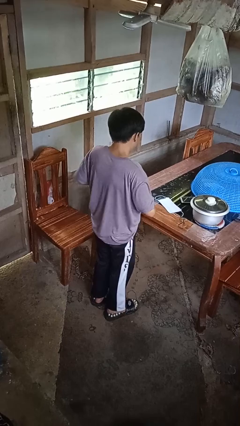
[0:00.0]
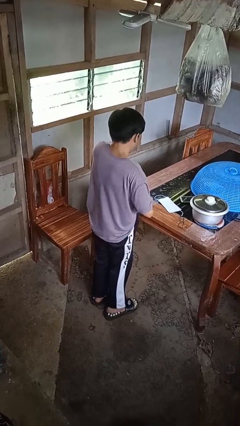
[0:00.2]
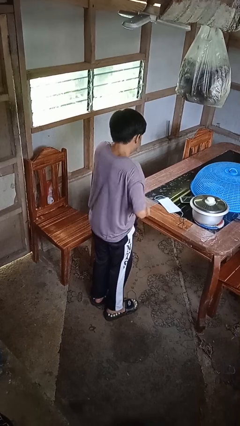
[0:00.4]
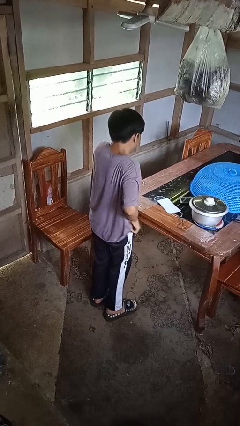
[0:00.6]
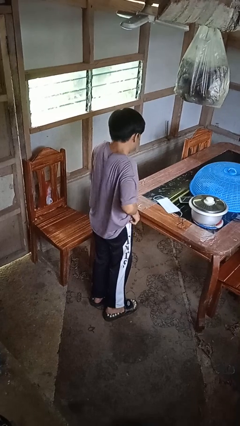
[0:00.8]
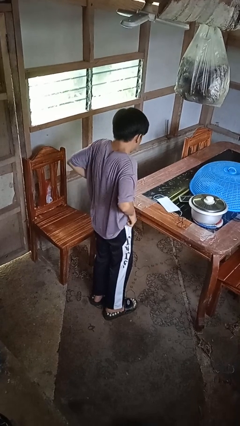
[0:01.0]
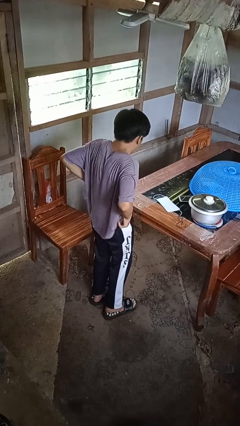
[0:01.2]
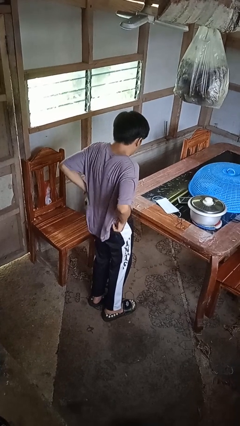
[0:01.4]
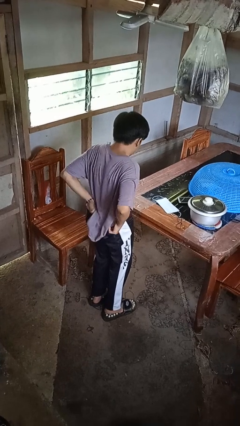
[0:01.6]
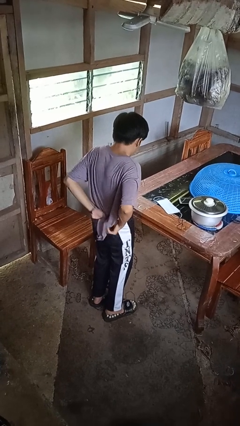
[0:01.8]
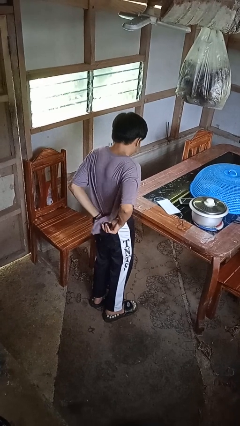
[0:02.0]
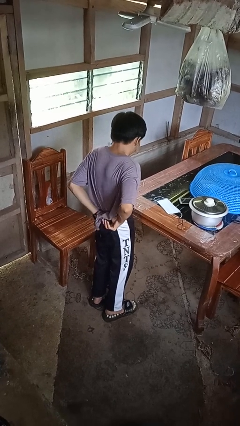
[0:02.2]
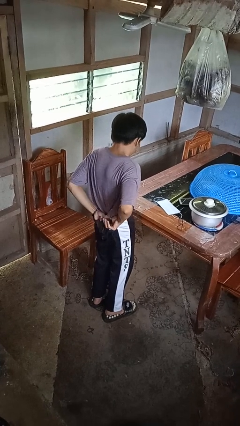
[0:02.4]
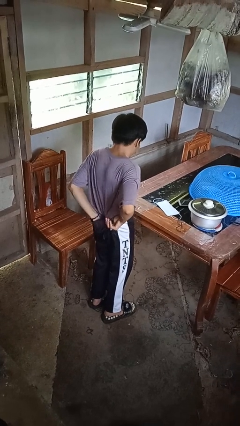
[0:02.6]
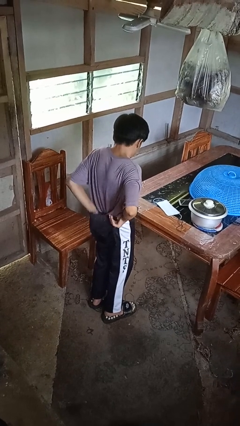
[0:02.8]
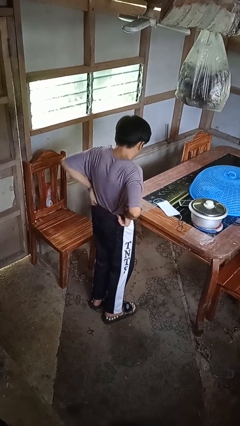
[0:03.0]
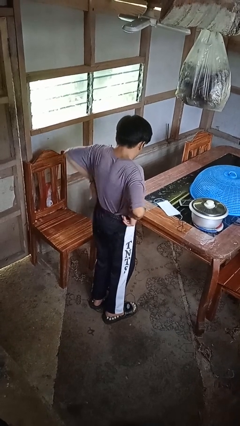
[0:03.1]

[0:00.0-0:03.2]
person tucks in shirt

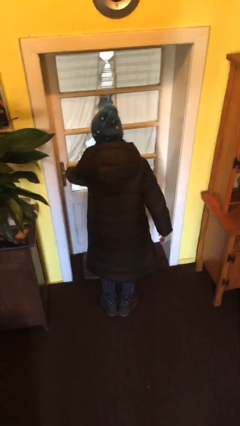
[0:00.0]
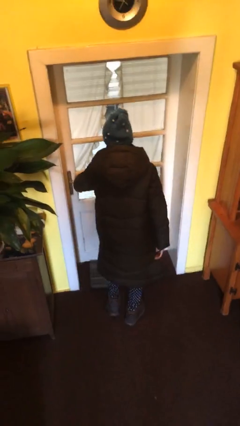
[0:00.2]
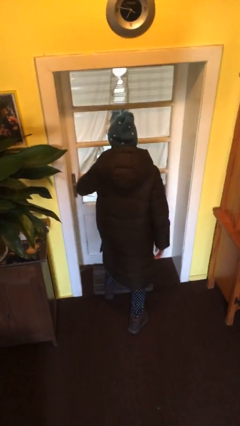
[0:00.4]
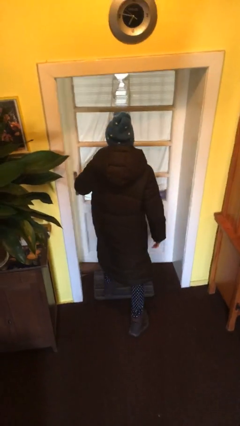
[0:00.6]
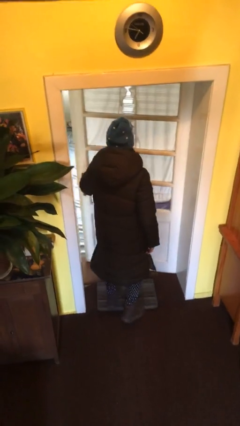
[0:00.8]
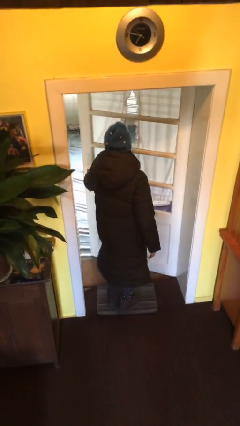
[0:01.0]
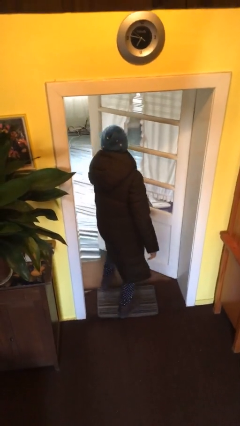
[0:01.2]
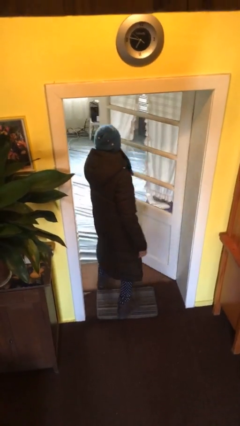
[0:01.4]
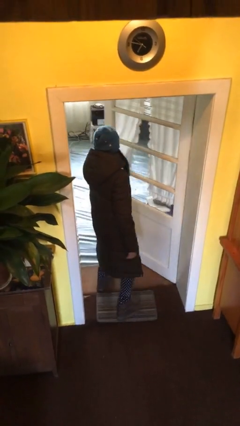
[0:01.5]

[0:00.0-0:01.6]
person opens facility door

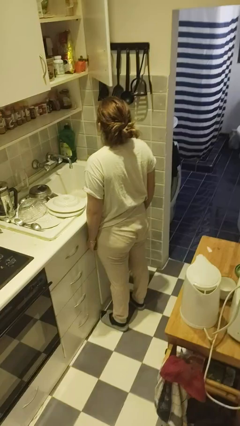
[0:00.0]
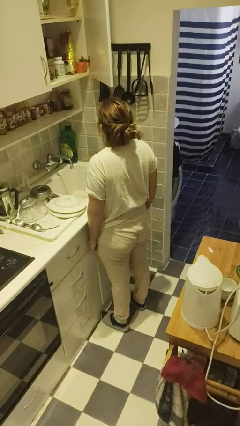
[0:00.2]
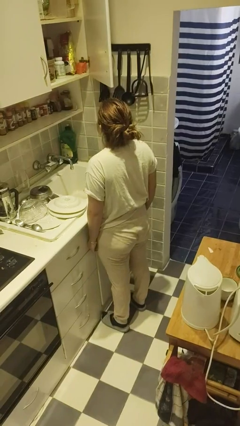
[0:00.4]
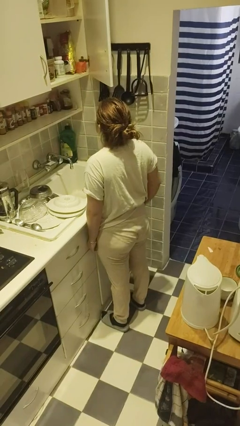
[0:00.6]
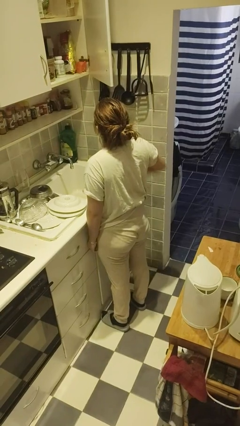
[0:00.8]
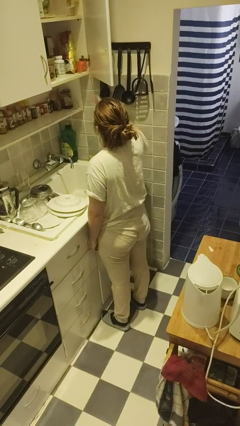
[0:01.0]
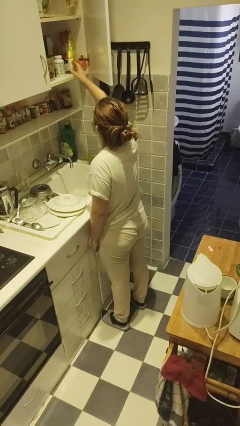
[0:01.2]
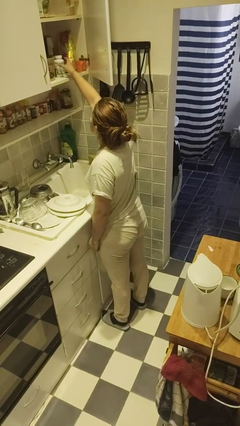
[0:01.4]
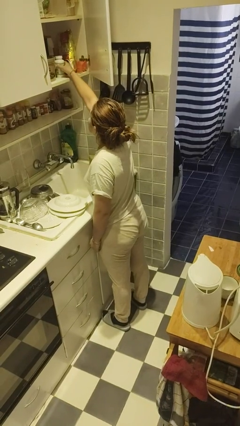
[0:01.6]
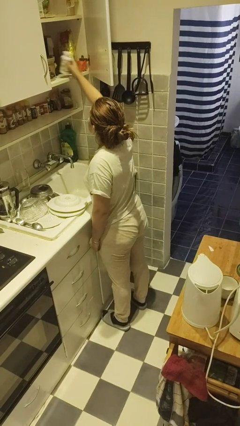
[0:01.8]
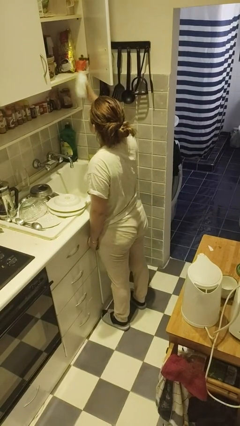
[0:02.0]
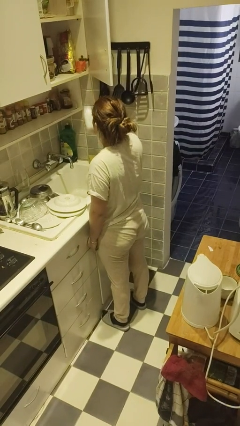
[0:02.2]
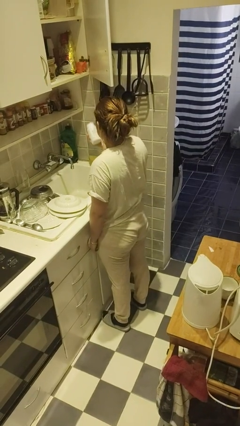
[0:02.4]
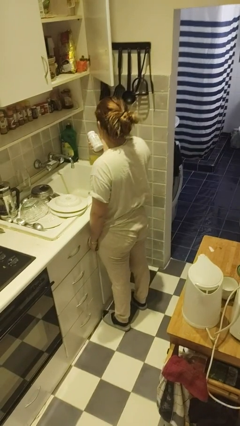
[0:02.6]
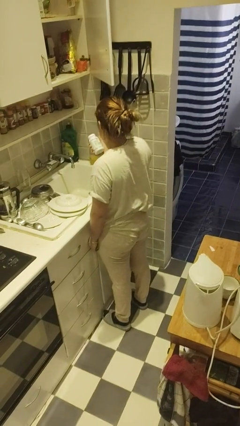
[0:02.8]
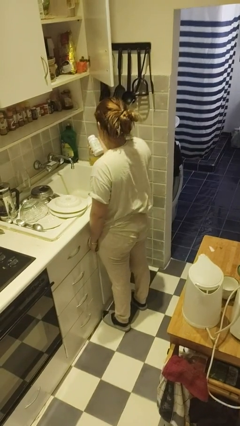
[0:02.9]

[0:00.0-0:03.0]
person picks up object from cabinet

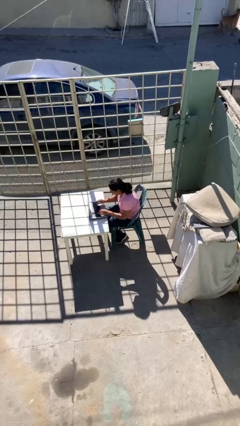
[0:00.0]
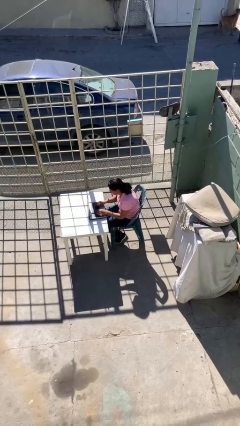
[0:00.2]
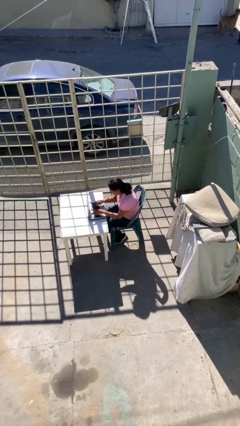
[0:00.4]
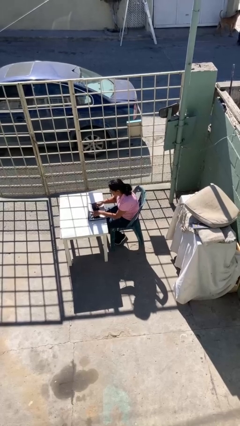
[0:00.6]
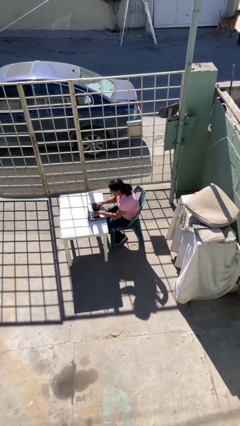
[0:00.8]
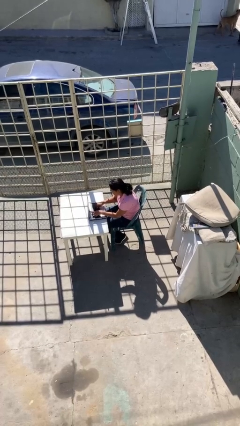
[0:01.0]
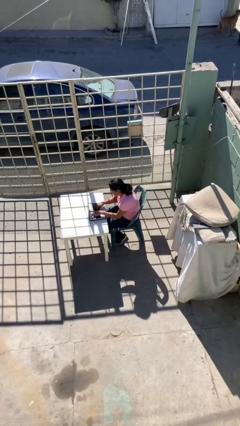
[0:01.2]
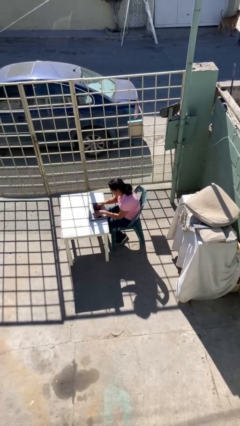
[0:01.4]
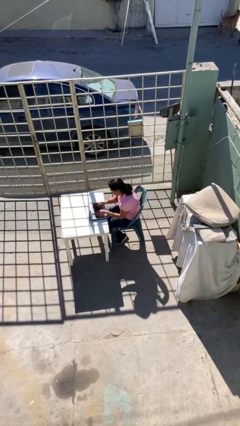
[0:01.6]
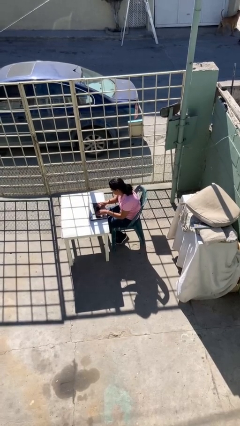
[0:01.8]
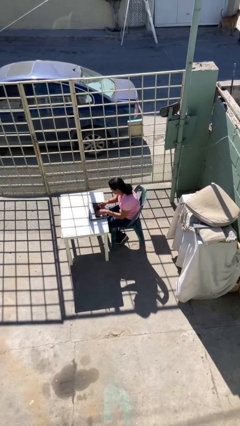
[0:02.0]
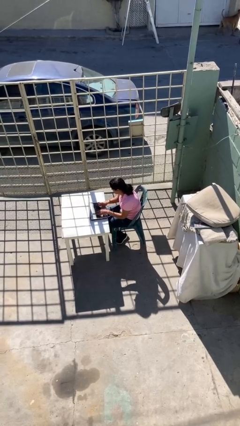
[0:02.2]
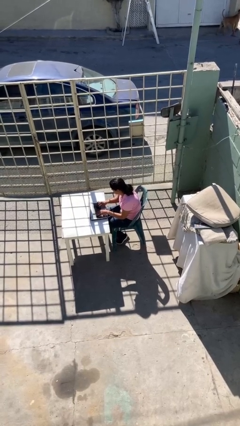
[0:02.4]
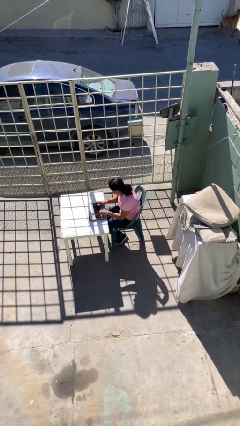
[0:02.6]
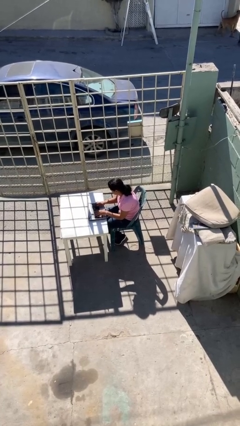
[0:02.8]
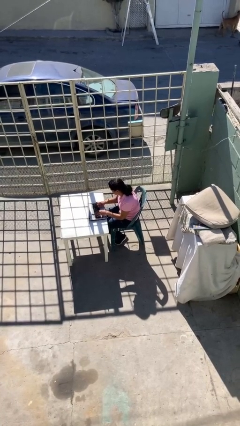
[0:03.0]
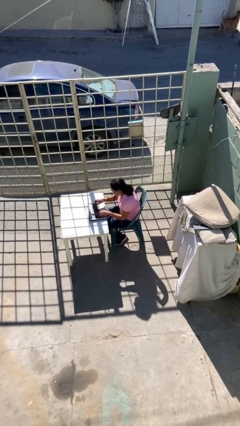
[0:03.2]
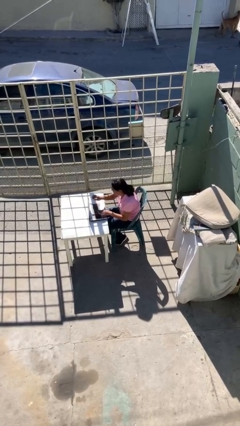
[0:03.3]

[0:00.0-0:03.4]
person interacts with laptop

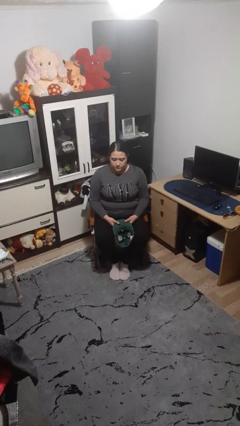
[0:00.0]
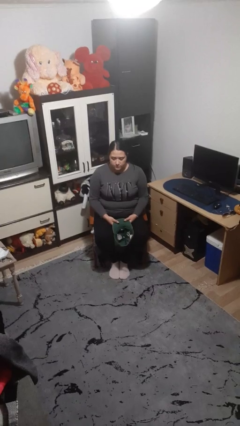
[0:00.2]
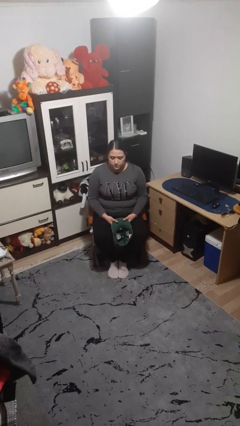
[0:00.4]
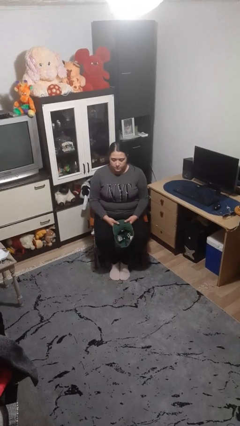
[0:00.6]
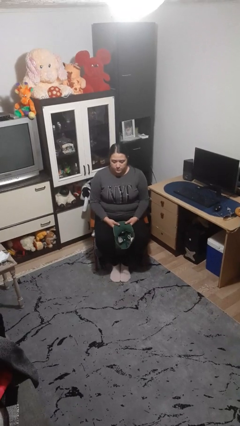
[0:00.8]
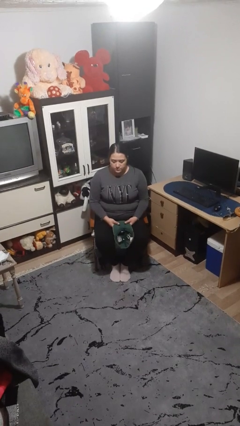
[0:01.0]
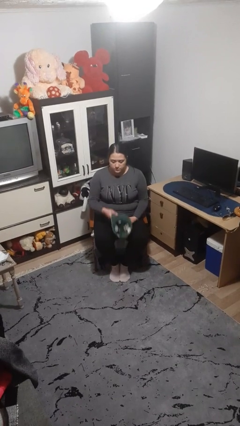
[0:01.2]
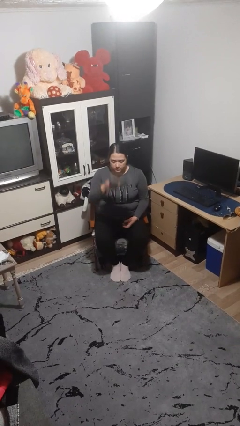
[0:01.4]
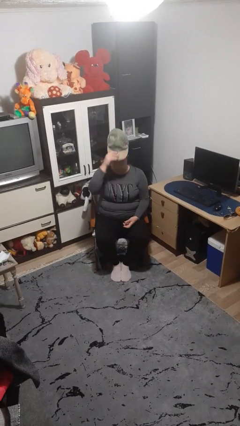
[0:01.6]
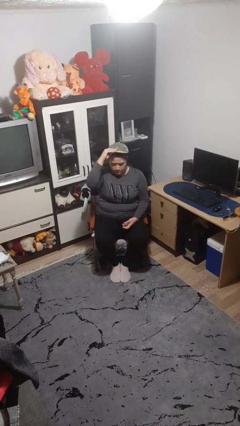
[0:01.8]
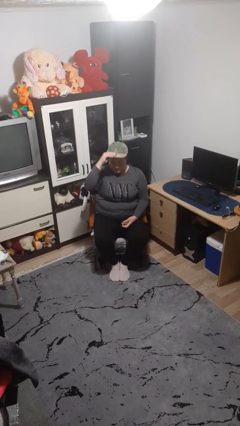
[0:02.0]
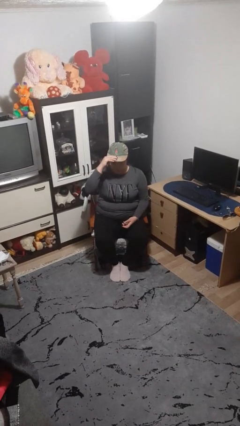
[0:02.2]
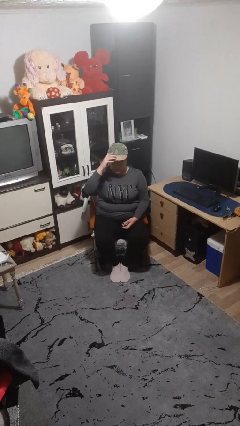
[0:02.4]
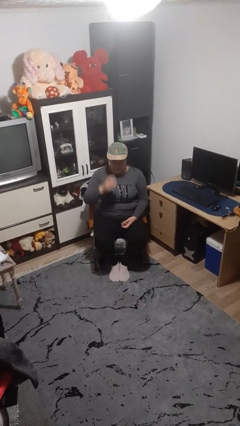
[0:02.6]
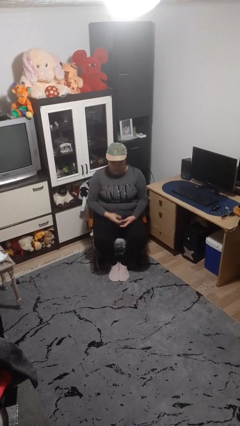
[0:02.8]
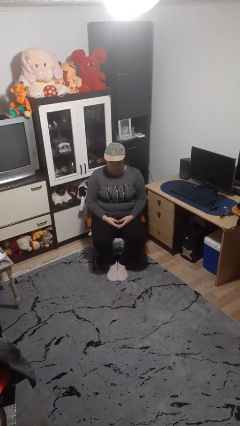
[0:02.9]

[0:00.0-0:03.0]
person puts on hat

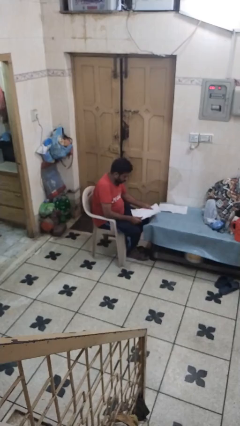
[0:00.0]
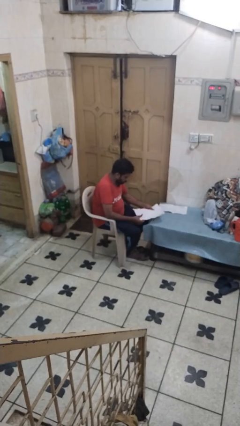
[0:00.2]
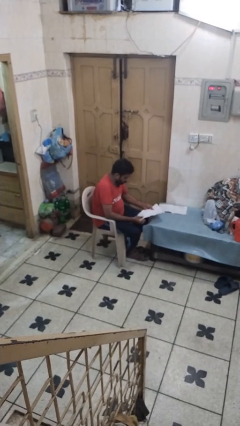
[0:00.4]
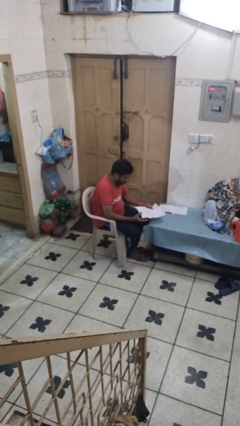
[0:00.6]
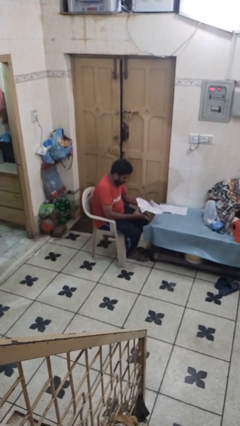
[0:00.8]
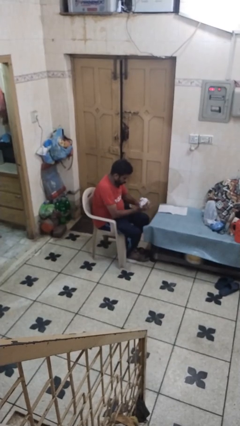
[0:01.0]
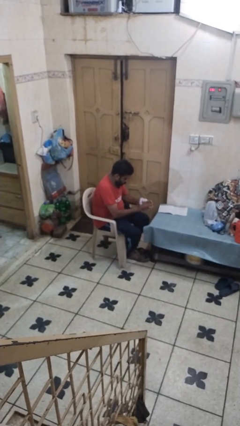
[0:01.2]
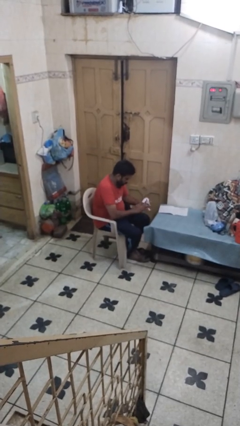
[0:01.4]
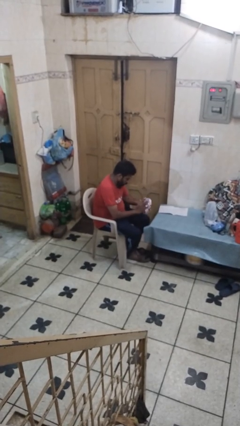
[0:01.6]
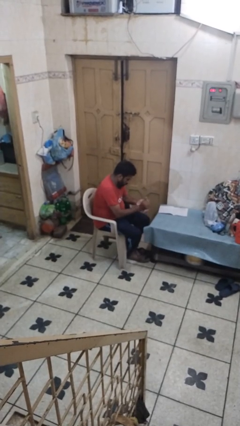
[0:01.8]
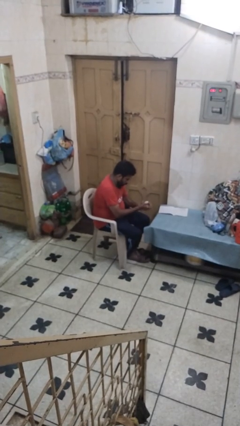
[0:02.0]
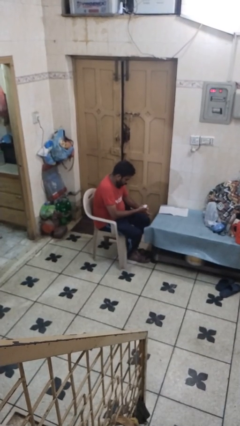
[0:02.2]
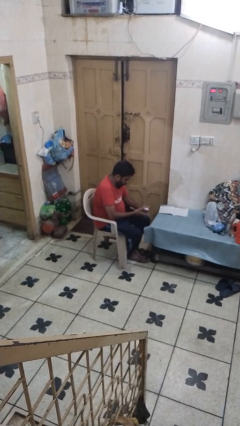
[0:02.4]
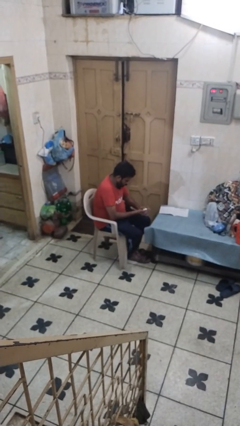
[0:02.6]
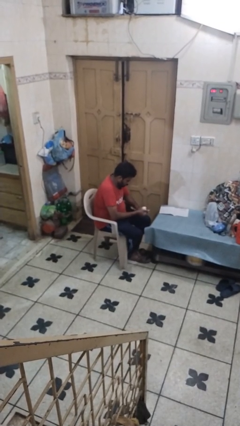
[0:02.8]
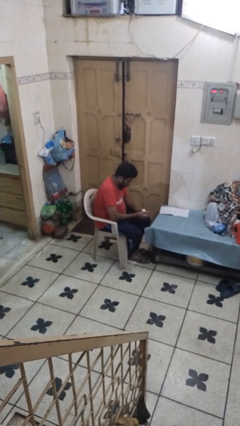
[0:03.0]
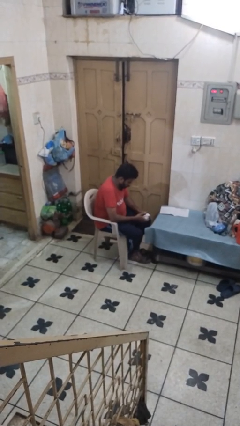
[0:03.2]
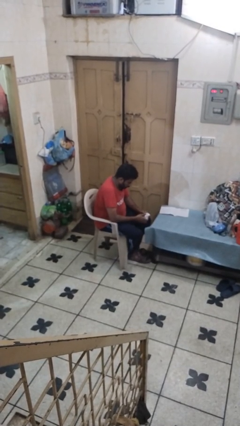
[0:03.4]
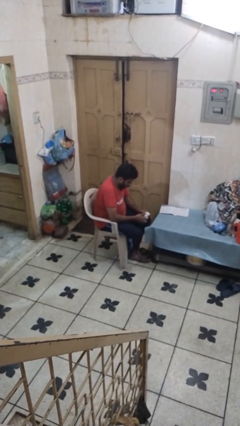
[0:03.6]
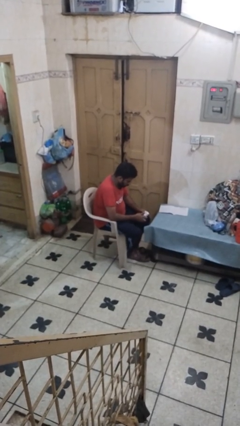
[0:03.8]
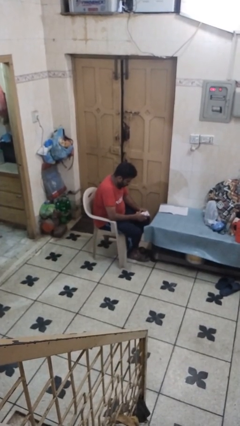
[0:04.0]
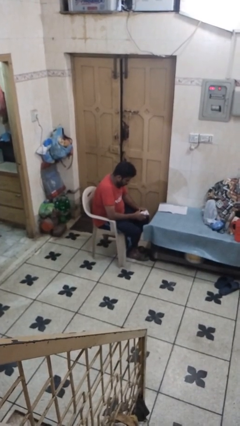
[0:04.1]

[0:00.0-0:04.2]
person crumples paper
